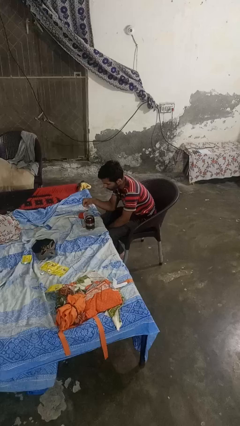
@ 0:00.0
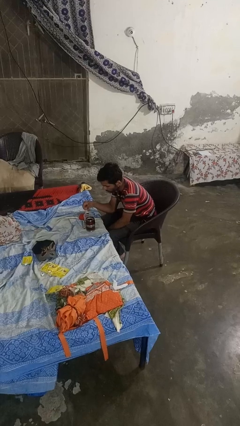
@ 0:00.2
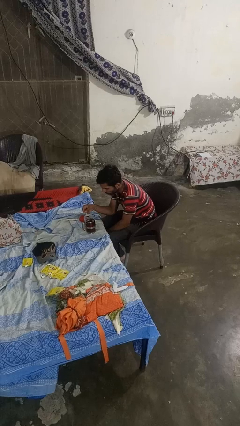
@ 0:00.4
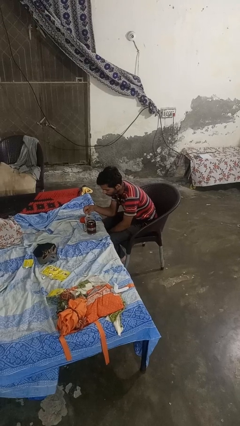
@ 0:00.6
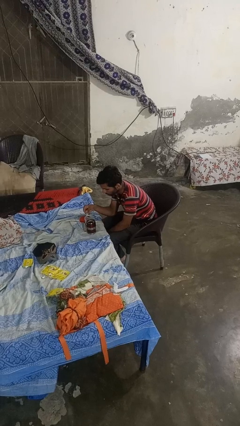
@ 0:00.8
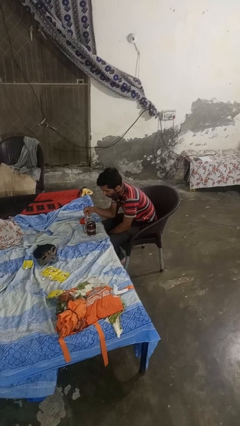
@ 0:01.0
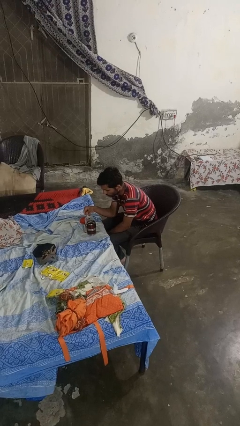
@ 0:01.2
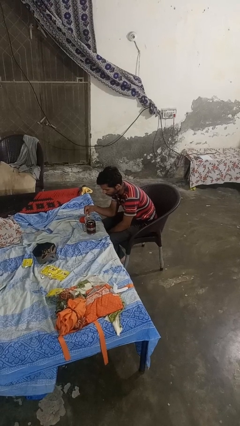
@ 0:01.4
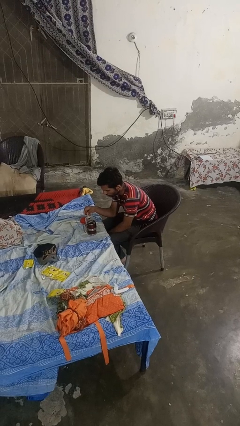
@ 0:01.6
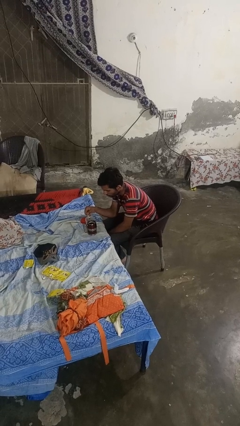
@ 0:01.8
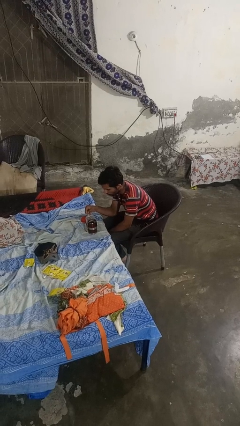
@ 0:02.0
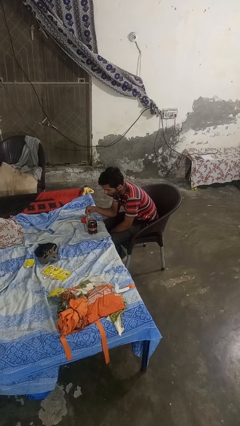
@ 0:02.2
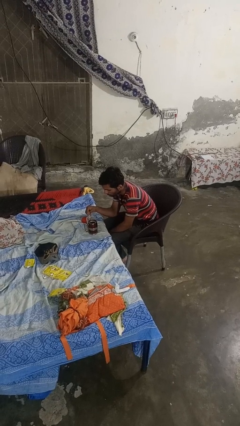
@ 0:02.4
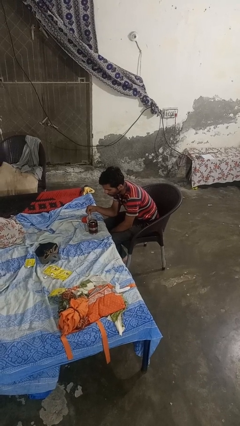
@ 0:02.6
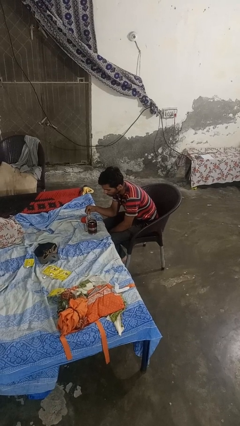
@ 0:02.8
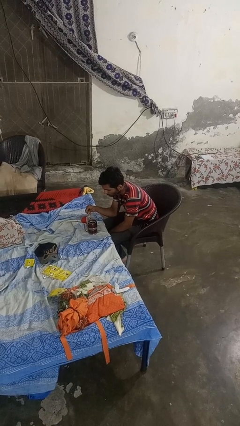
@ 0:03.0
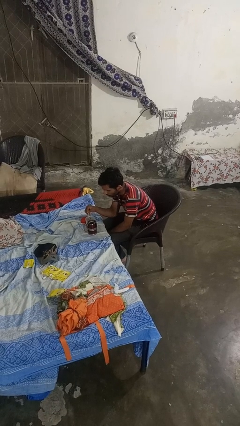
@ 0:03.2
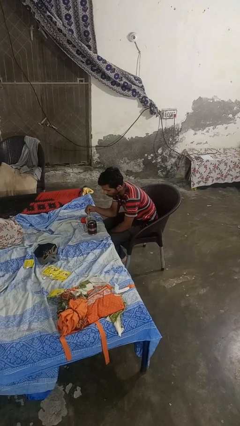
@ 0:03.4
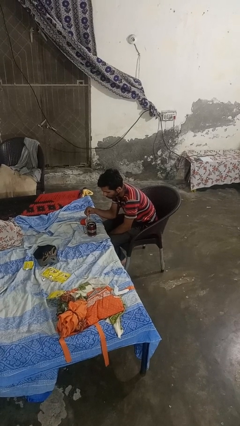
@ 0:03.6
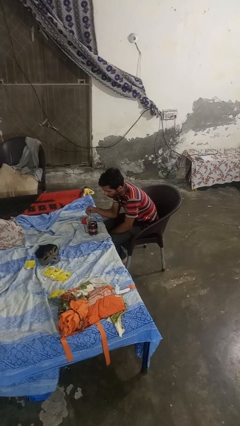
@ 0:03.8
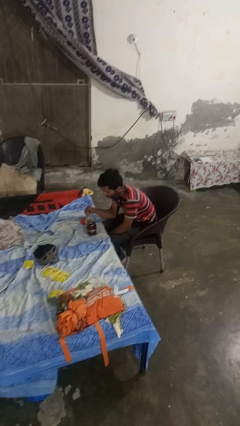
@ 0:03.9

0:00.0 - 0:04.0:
person pours coffee into mug

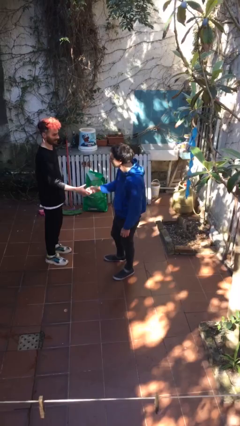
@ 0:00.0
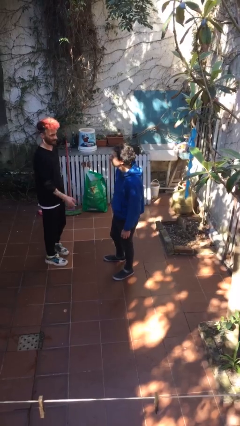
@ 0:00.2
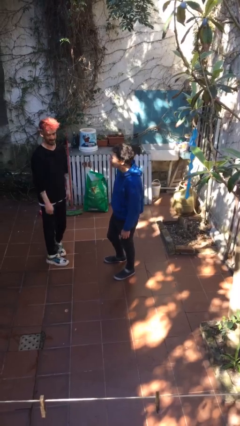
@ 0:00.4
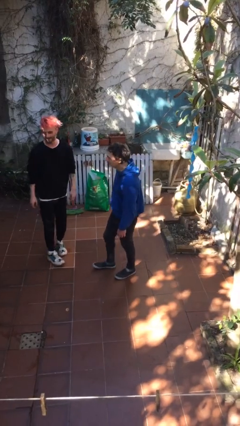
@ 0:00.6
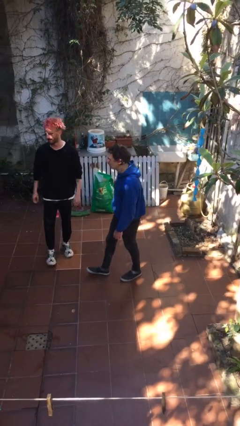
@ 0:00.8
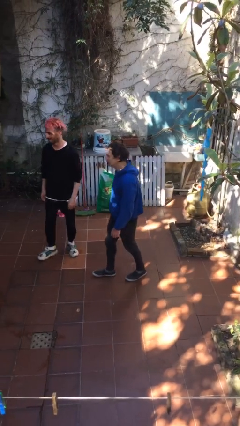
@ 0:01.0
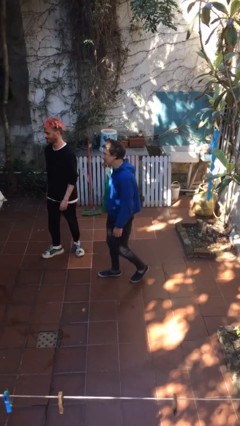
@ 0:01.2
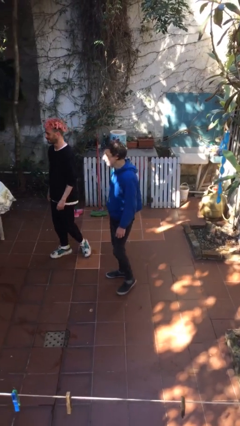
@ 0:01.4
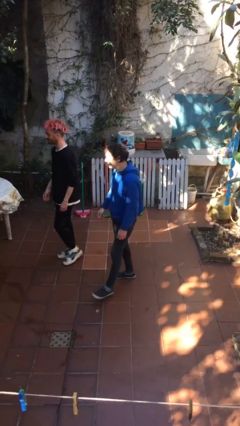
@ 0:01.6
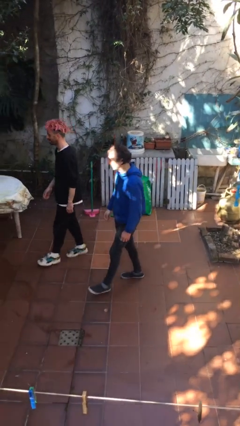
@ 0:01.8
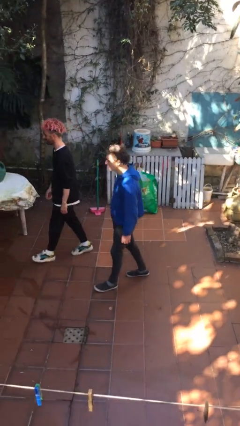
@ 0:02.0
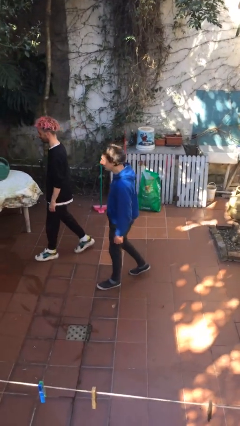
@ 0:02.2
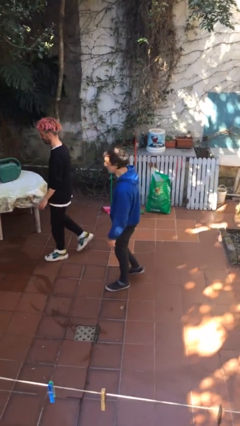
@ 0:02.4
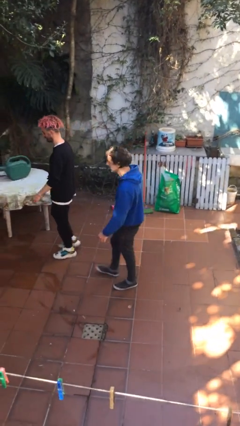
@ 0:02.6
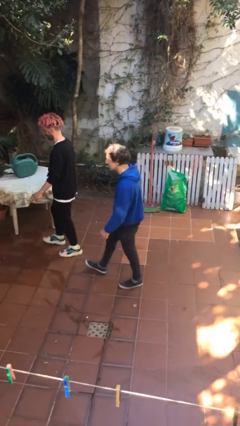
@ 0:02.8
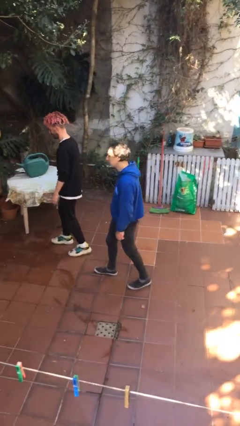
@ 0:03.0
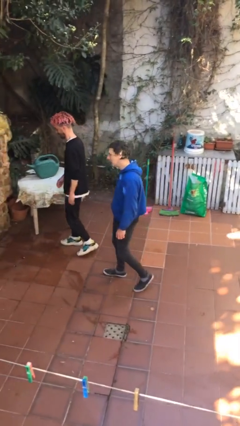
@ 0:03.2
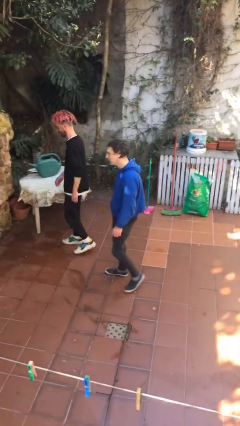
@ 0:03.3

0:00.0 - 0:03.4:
person talks to person

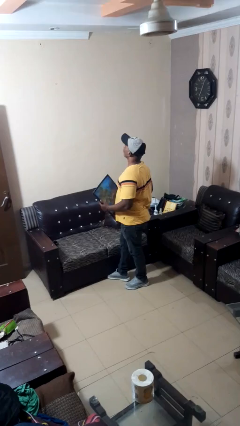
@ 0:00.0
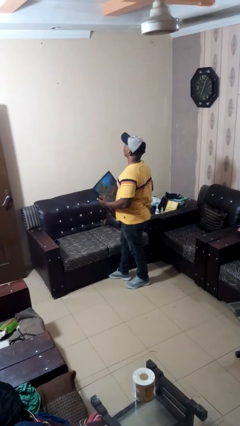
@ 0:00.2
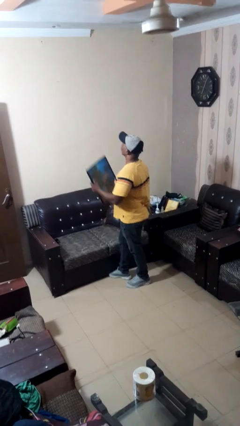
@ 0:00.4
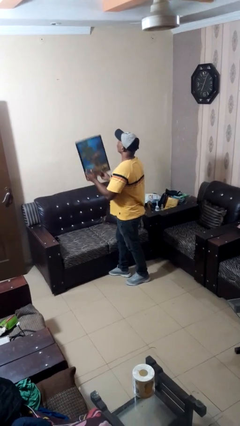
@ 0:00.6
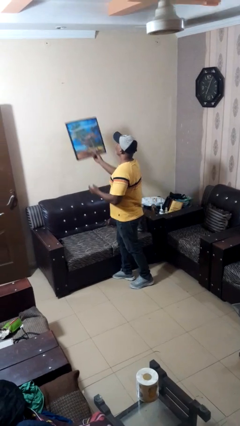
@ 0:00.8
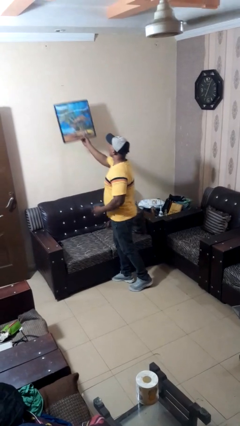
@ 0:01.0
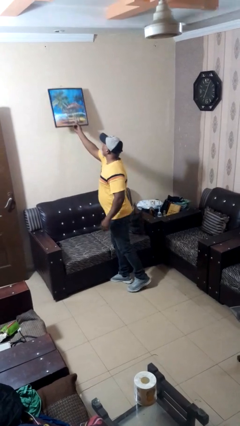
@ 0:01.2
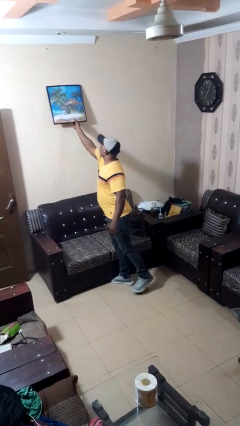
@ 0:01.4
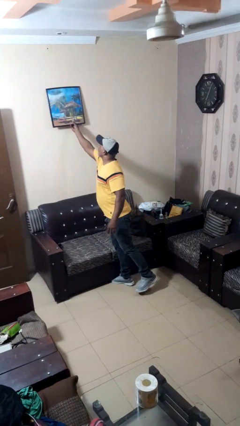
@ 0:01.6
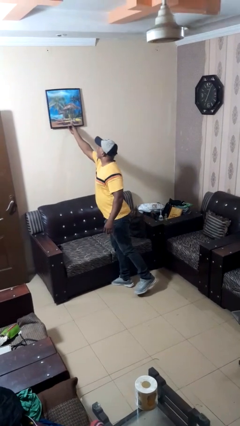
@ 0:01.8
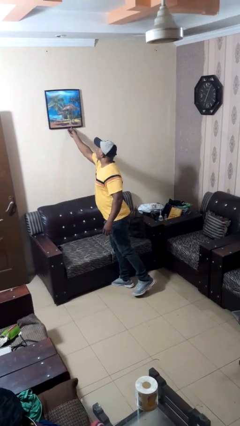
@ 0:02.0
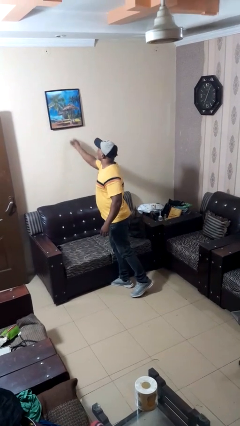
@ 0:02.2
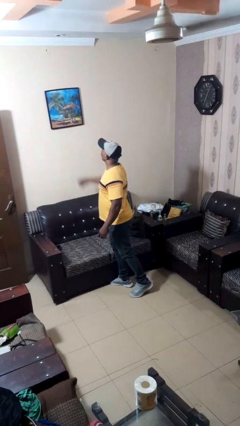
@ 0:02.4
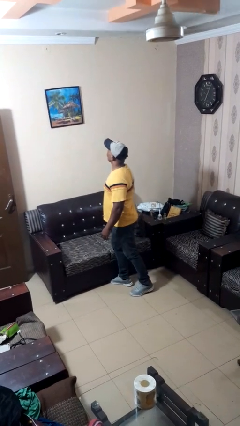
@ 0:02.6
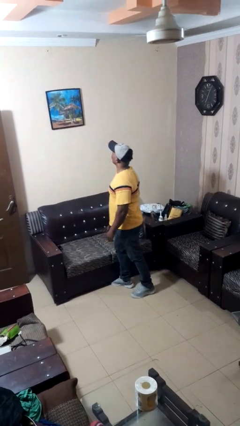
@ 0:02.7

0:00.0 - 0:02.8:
person puts up picture frame

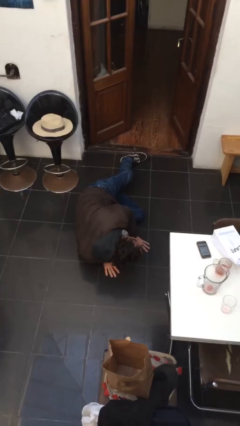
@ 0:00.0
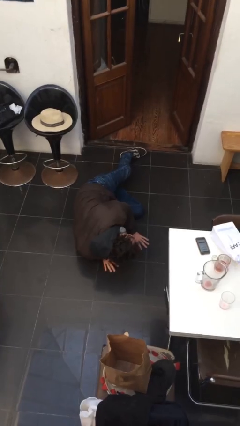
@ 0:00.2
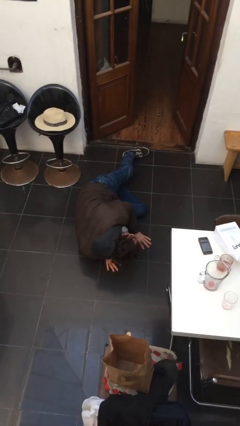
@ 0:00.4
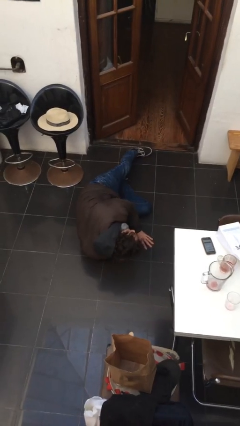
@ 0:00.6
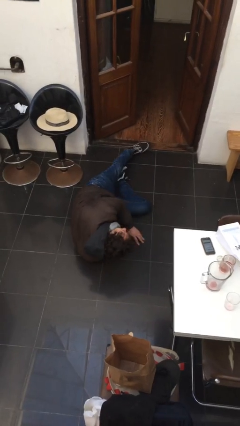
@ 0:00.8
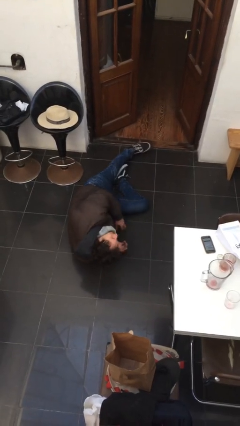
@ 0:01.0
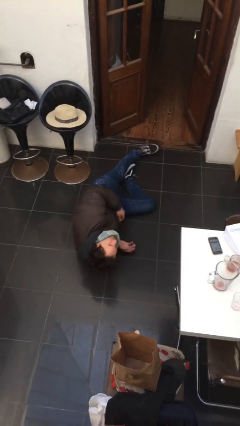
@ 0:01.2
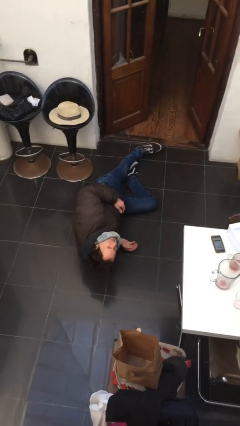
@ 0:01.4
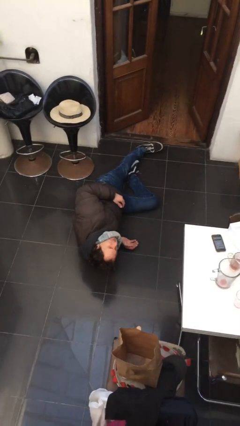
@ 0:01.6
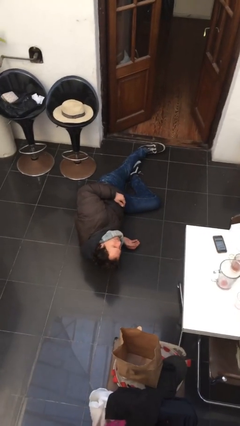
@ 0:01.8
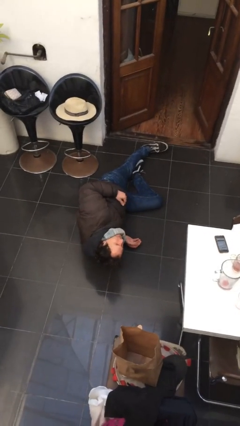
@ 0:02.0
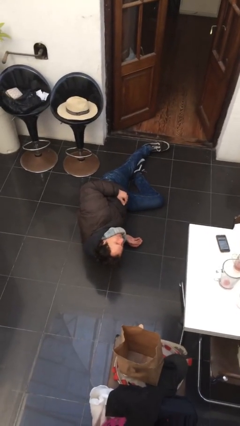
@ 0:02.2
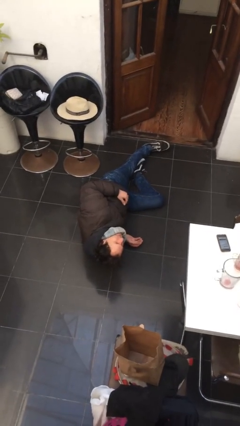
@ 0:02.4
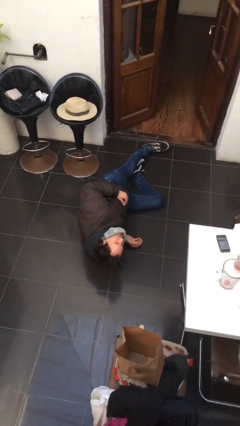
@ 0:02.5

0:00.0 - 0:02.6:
person lies down on floor

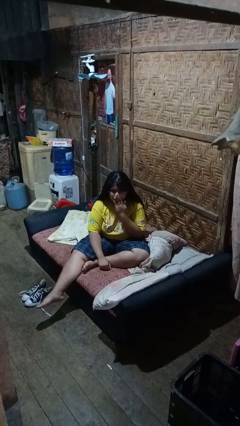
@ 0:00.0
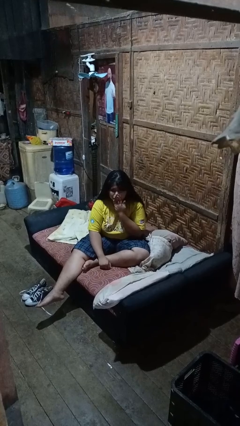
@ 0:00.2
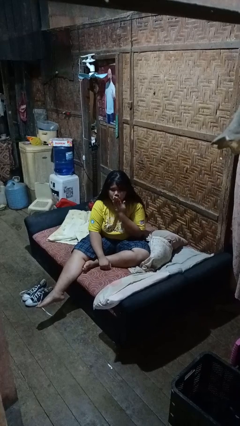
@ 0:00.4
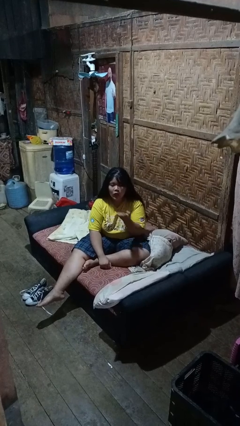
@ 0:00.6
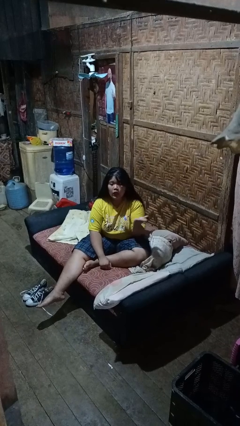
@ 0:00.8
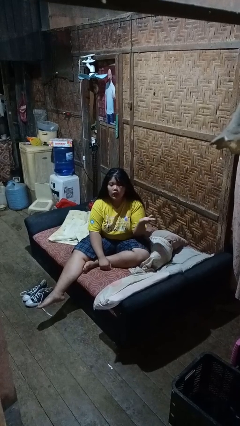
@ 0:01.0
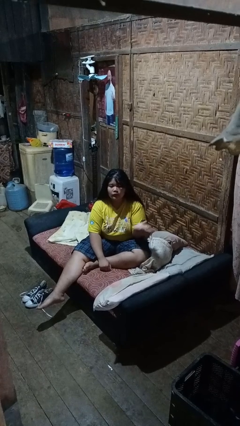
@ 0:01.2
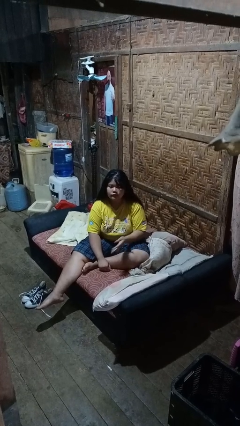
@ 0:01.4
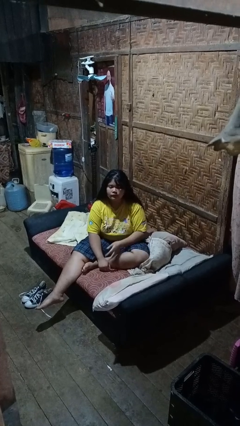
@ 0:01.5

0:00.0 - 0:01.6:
person gestures blow kiss

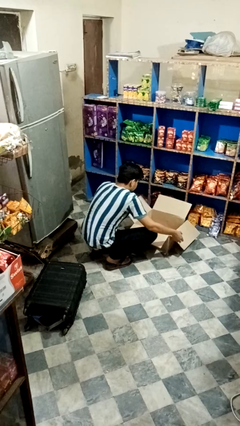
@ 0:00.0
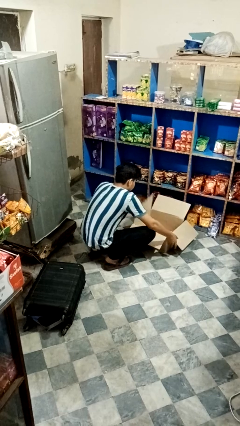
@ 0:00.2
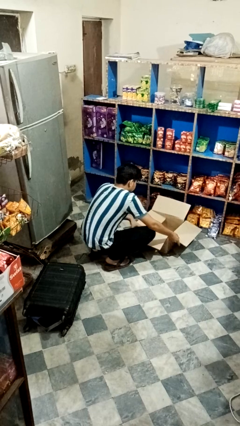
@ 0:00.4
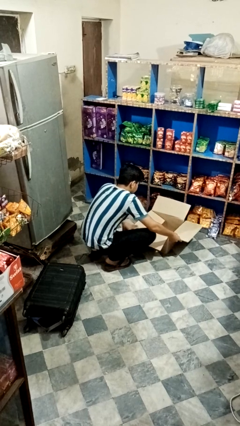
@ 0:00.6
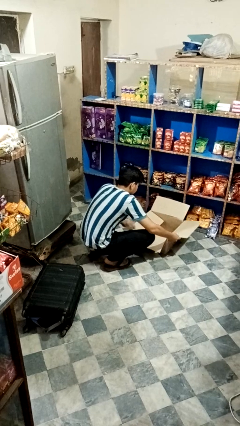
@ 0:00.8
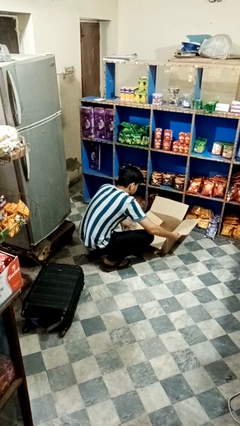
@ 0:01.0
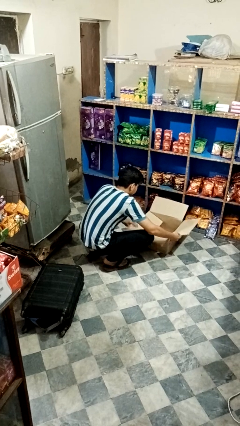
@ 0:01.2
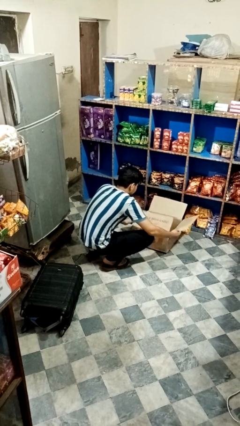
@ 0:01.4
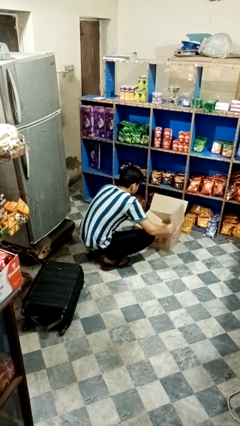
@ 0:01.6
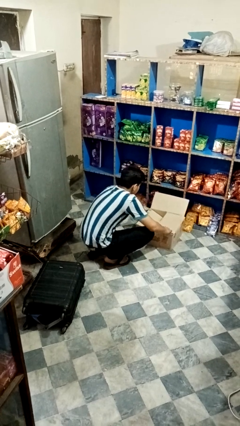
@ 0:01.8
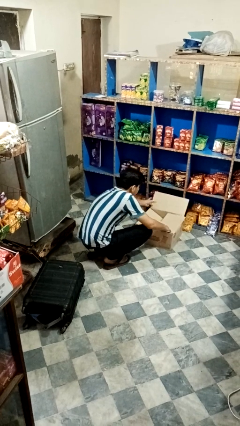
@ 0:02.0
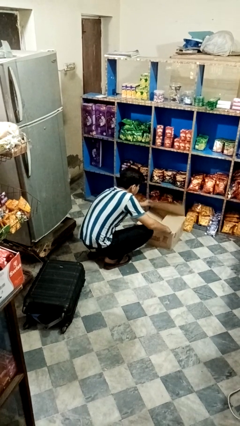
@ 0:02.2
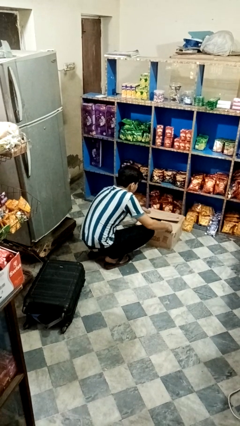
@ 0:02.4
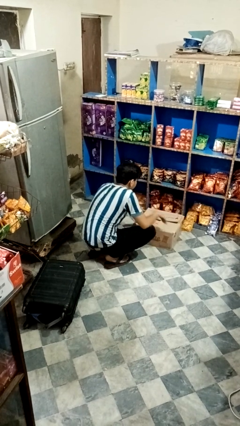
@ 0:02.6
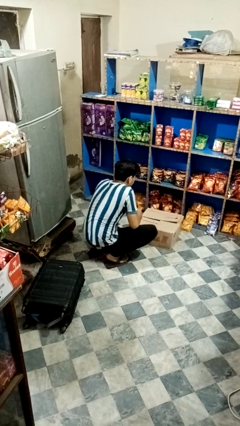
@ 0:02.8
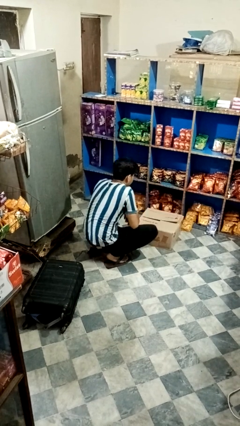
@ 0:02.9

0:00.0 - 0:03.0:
person closes box
